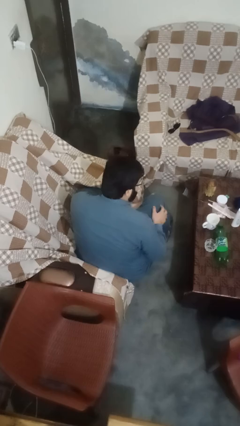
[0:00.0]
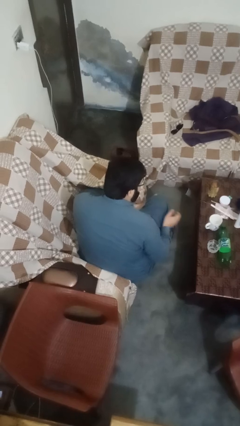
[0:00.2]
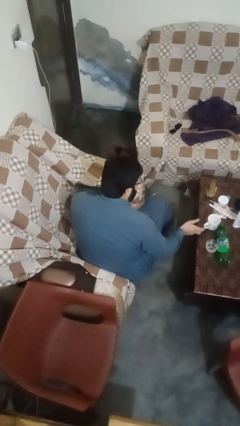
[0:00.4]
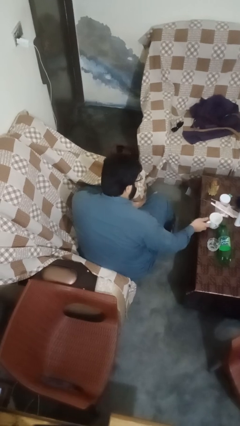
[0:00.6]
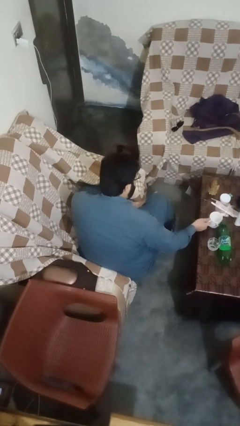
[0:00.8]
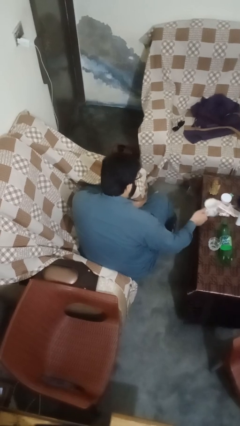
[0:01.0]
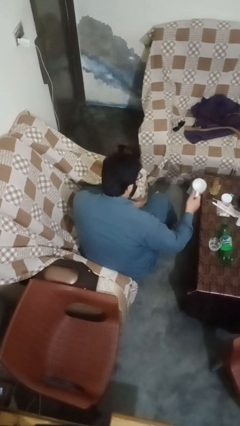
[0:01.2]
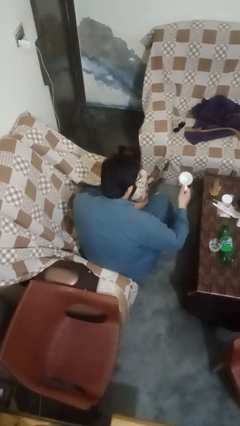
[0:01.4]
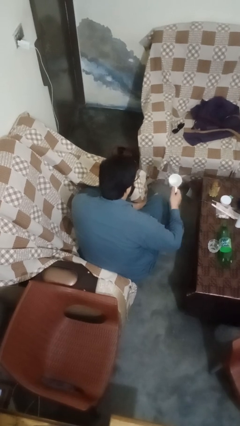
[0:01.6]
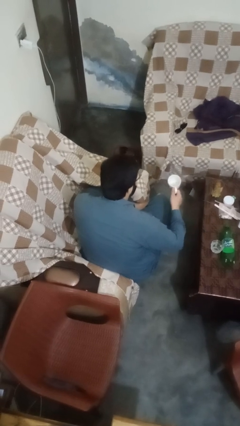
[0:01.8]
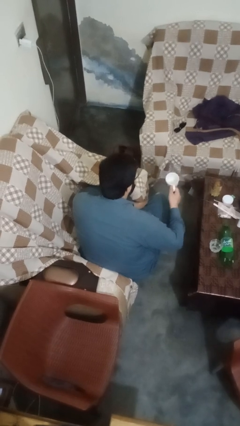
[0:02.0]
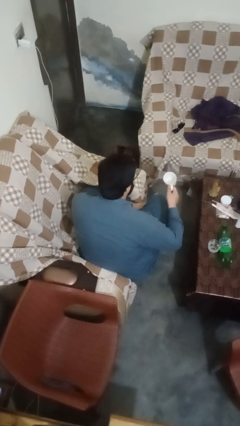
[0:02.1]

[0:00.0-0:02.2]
person picks up object from table

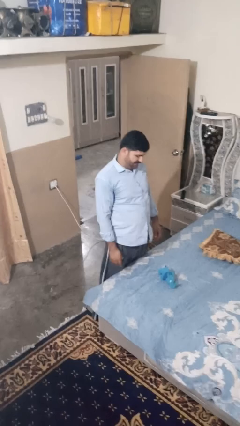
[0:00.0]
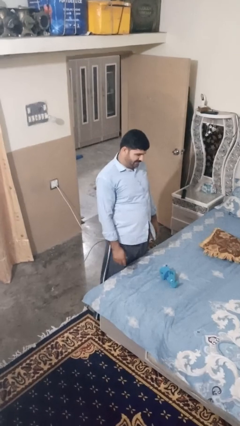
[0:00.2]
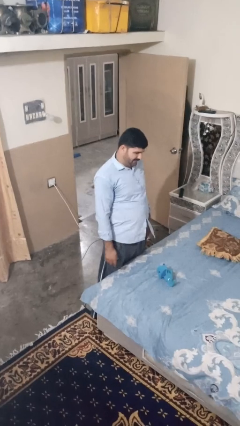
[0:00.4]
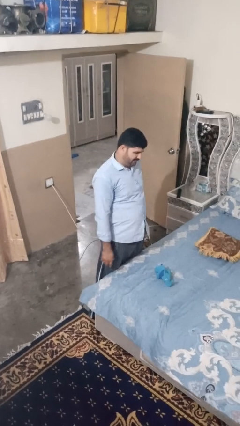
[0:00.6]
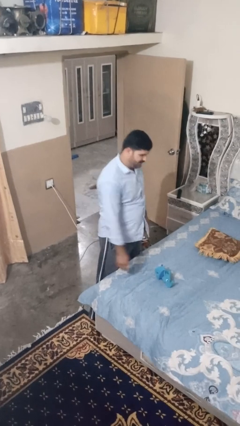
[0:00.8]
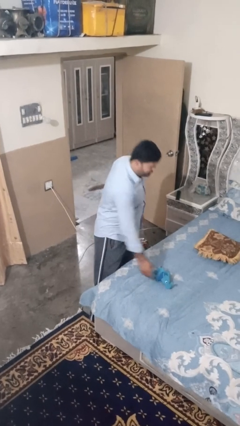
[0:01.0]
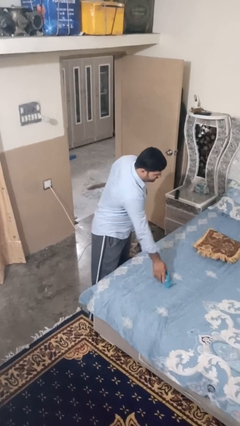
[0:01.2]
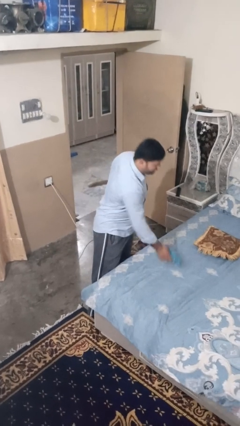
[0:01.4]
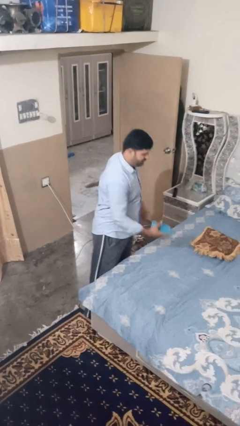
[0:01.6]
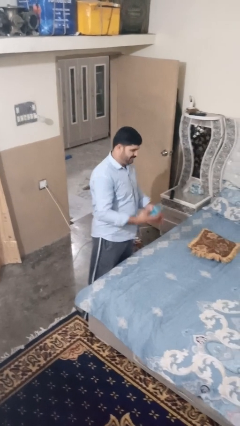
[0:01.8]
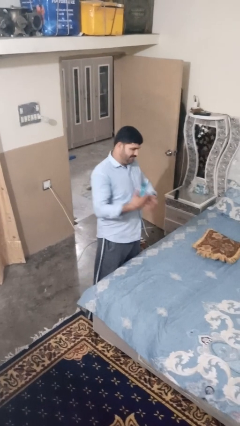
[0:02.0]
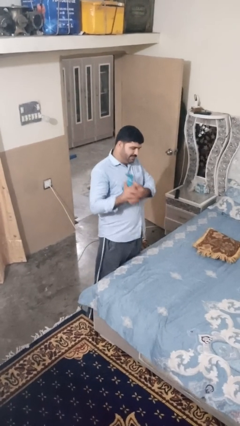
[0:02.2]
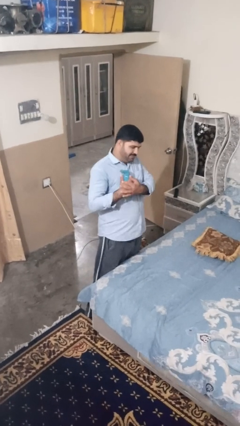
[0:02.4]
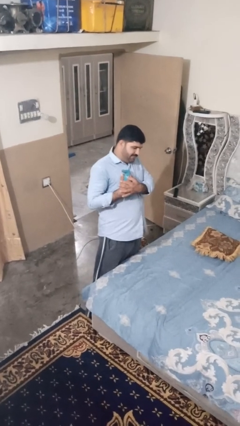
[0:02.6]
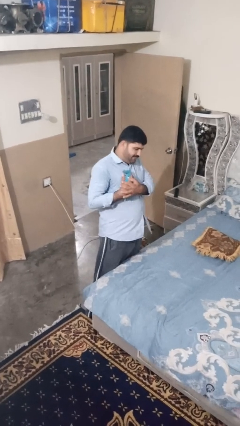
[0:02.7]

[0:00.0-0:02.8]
person hugs stuffed animal

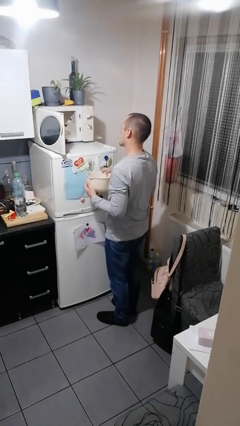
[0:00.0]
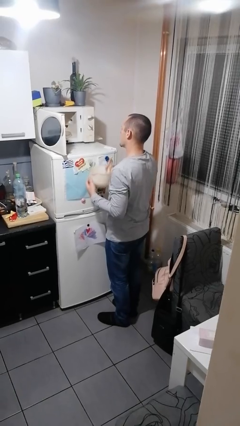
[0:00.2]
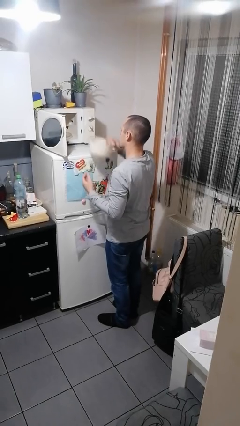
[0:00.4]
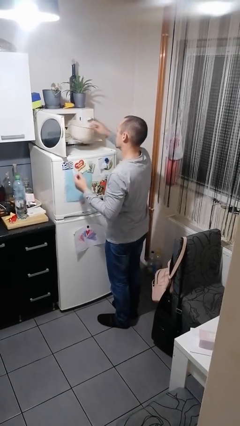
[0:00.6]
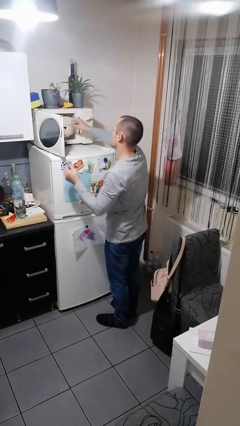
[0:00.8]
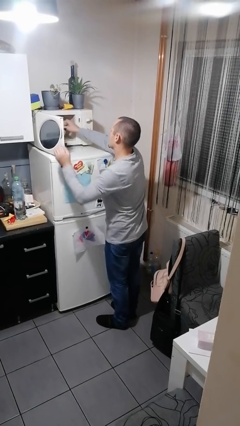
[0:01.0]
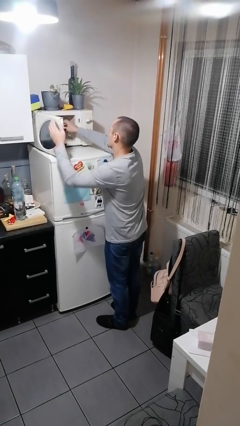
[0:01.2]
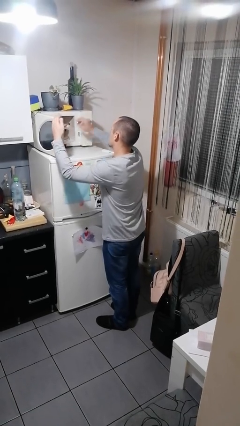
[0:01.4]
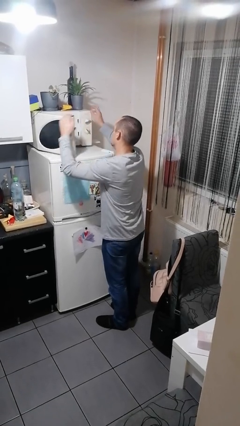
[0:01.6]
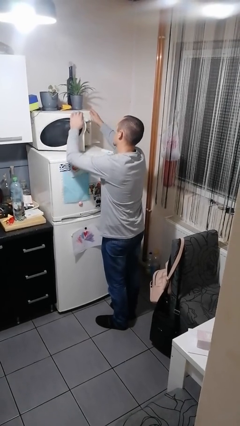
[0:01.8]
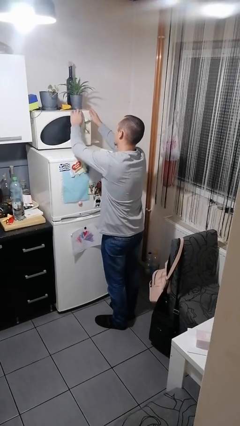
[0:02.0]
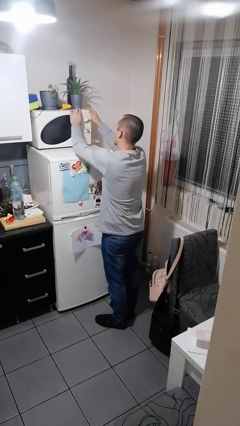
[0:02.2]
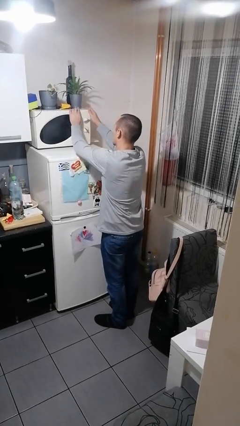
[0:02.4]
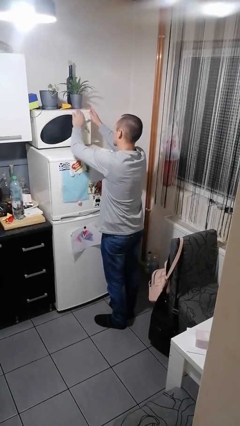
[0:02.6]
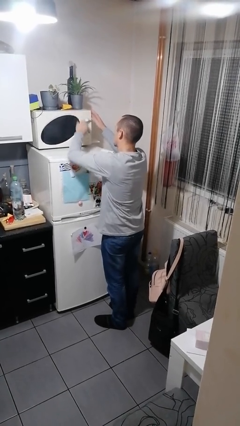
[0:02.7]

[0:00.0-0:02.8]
person puts object into microwave

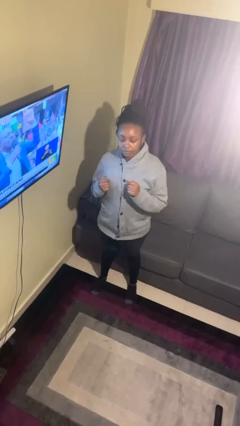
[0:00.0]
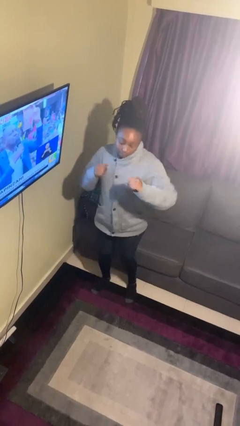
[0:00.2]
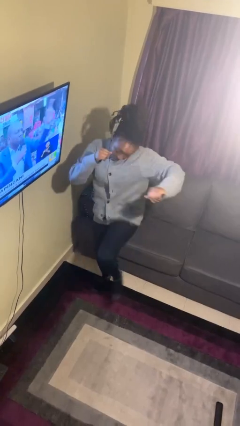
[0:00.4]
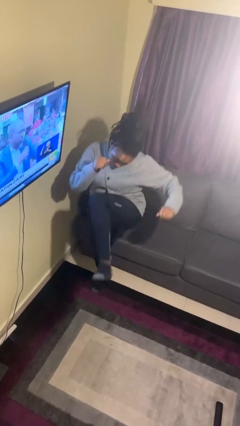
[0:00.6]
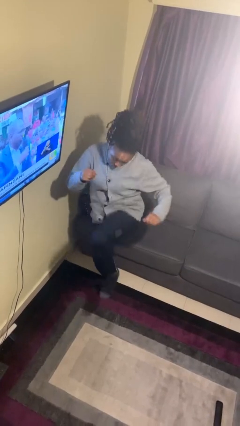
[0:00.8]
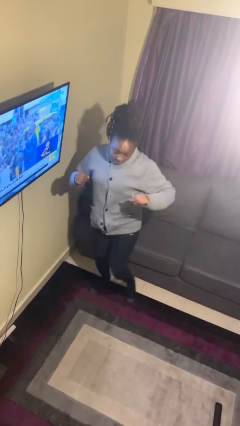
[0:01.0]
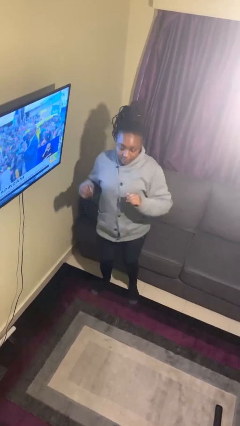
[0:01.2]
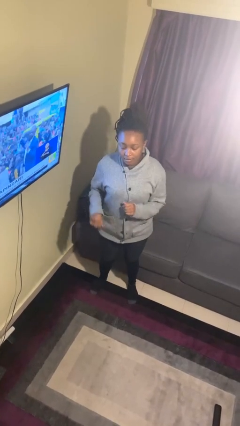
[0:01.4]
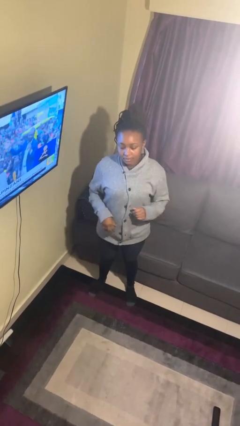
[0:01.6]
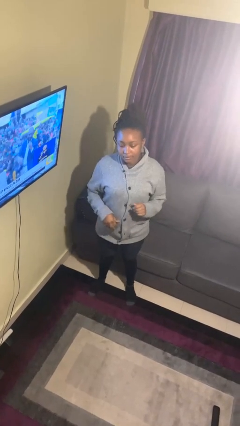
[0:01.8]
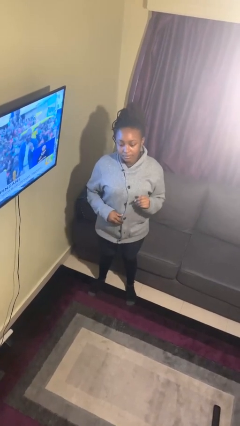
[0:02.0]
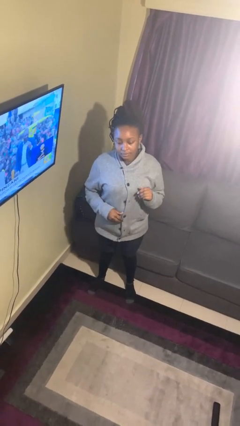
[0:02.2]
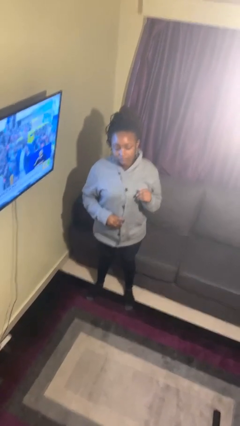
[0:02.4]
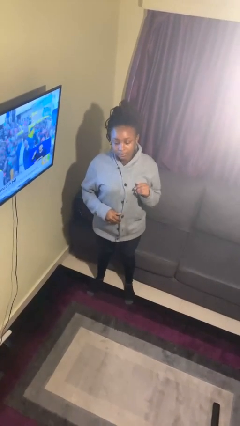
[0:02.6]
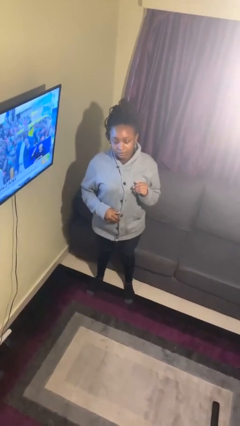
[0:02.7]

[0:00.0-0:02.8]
person karate kicks

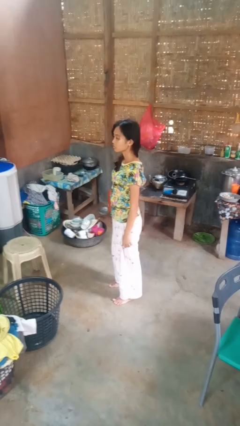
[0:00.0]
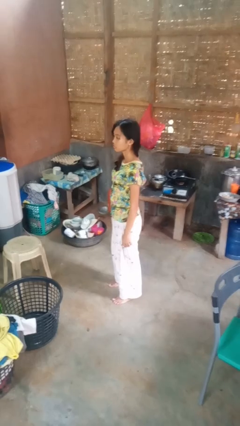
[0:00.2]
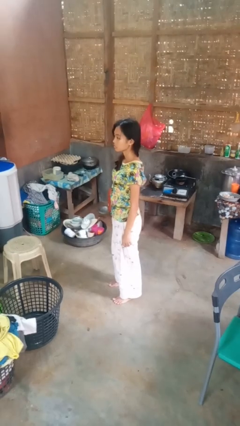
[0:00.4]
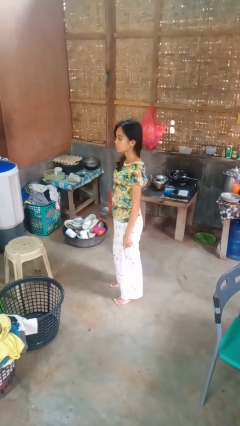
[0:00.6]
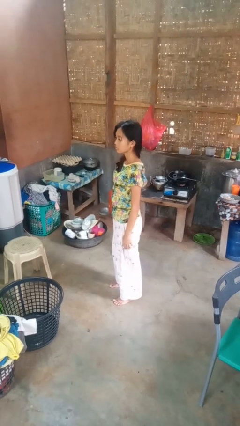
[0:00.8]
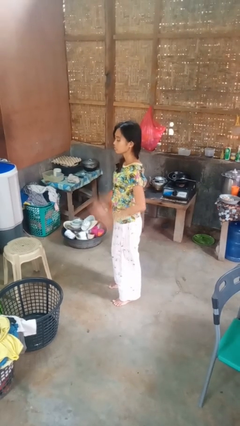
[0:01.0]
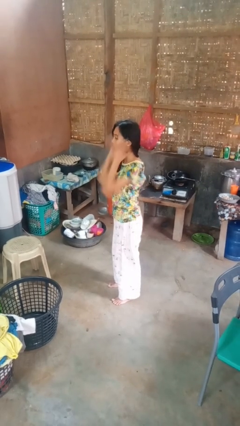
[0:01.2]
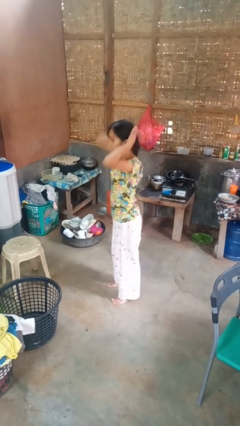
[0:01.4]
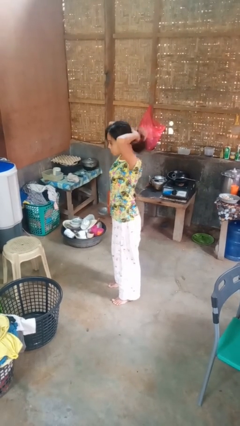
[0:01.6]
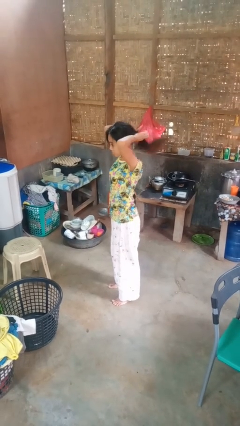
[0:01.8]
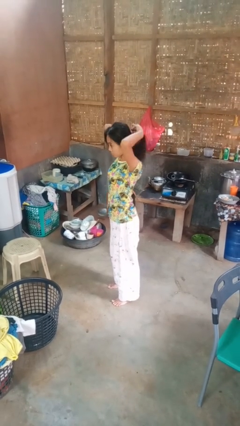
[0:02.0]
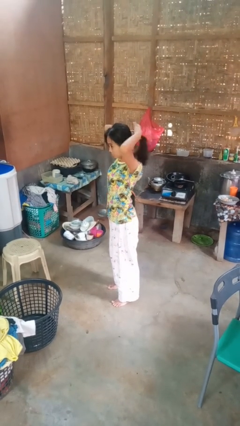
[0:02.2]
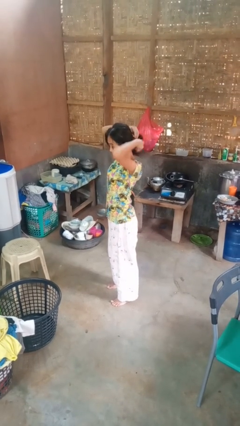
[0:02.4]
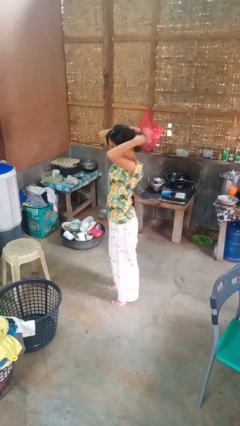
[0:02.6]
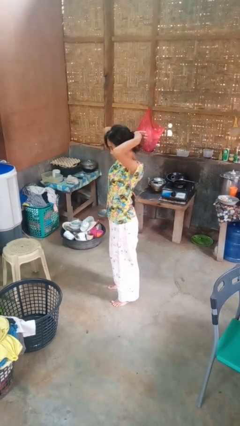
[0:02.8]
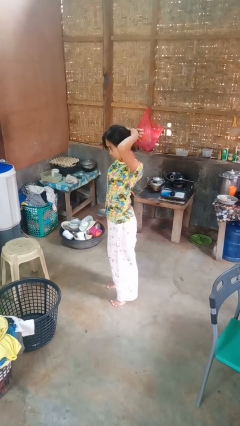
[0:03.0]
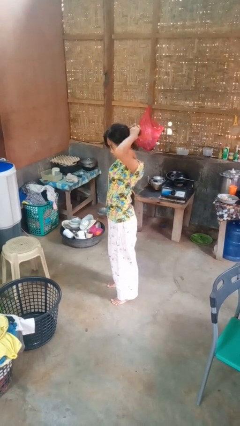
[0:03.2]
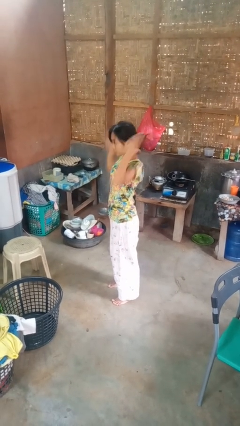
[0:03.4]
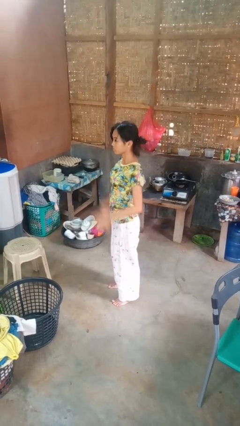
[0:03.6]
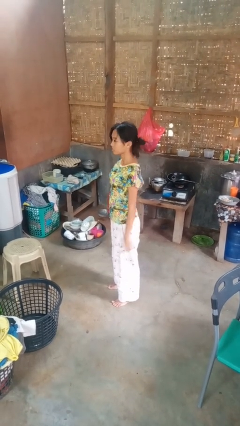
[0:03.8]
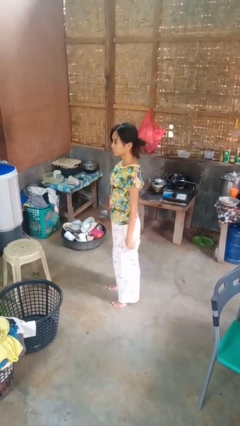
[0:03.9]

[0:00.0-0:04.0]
person puts hair in ponytail

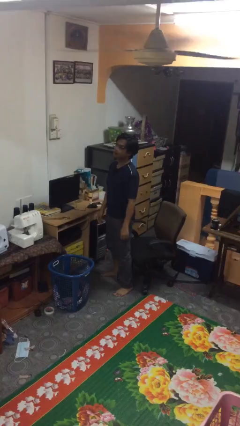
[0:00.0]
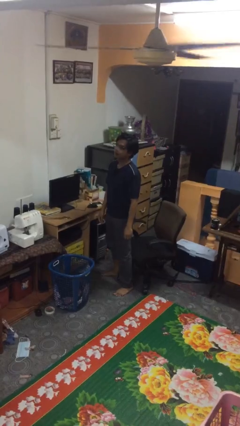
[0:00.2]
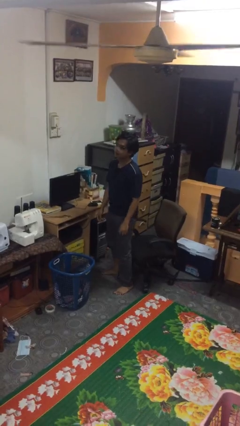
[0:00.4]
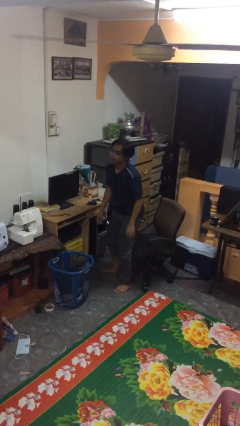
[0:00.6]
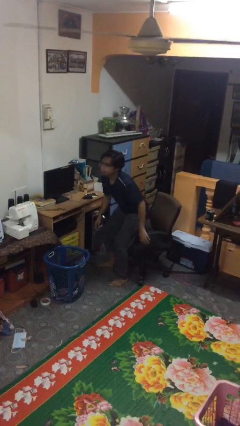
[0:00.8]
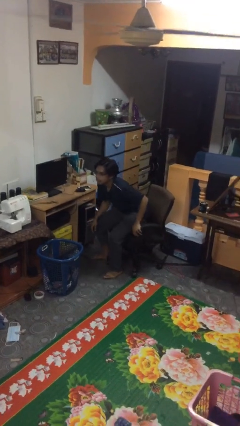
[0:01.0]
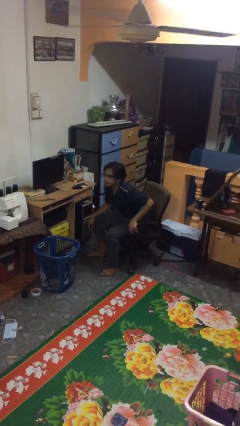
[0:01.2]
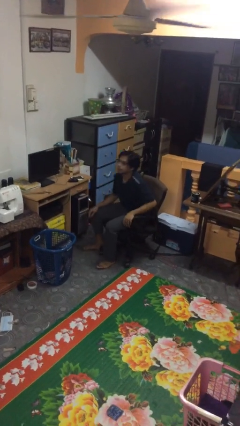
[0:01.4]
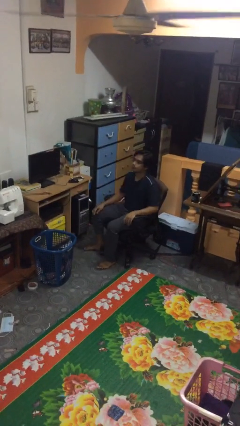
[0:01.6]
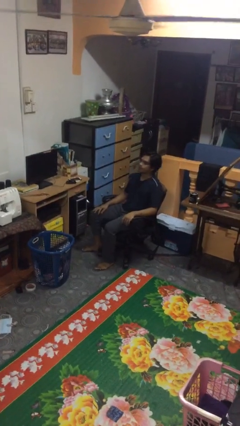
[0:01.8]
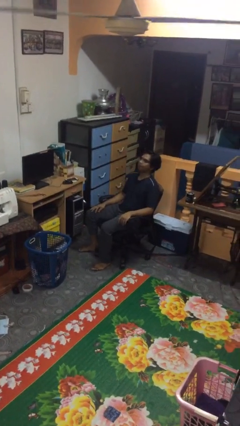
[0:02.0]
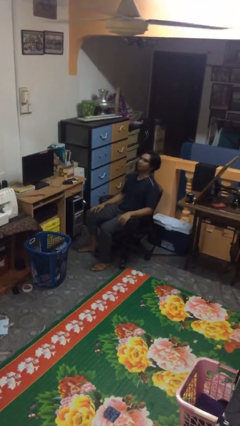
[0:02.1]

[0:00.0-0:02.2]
person sits down

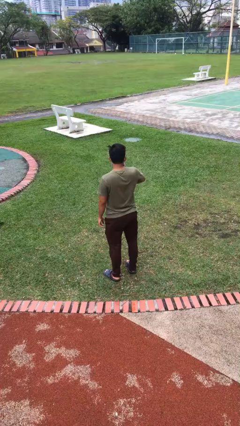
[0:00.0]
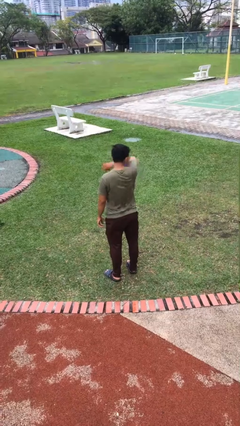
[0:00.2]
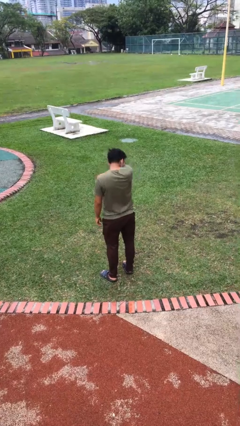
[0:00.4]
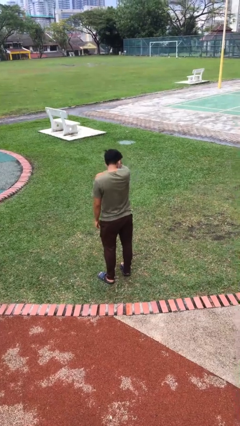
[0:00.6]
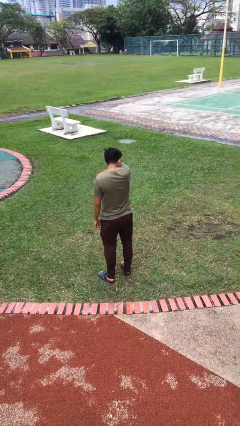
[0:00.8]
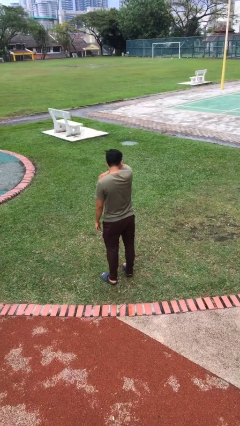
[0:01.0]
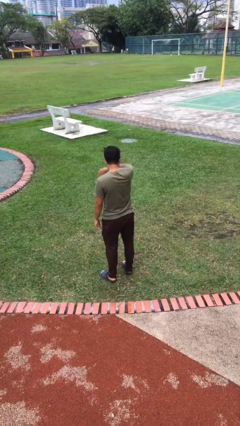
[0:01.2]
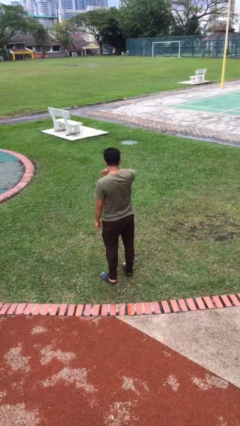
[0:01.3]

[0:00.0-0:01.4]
person sneezes into arm
